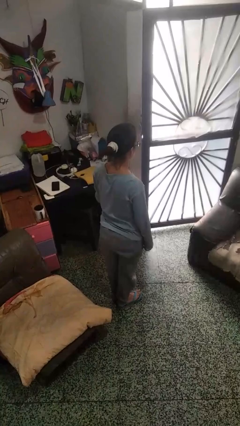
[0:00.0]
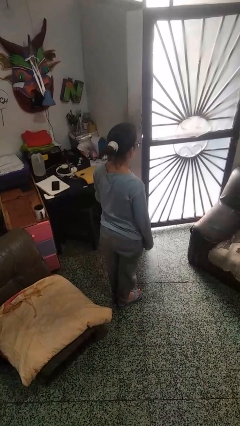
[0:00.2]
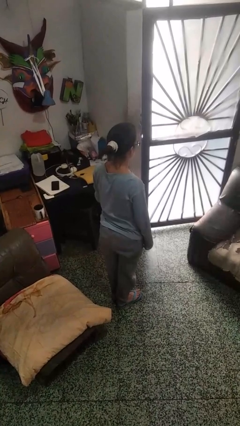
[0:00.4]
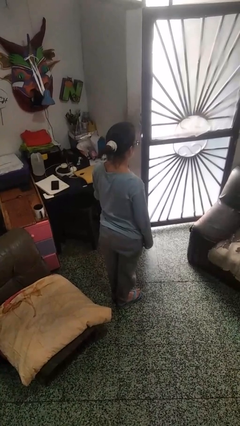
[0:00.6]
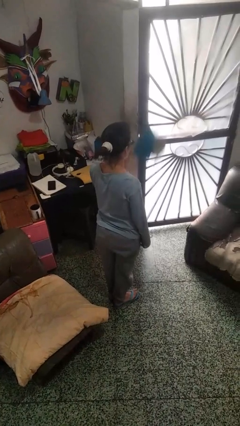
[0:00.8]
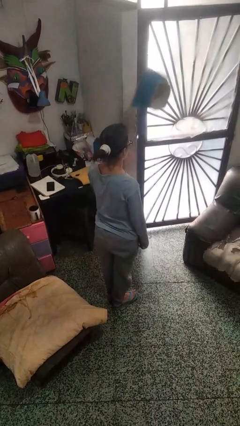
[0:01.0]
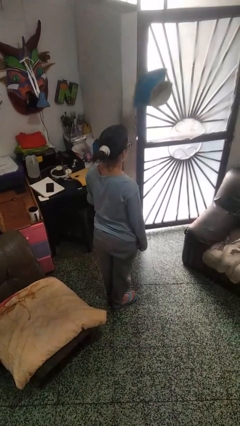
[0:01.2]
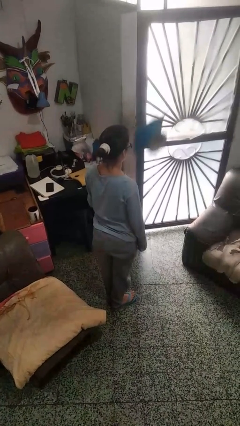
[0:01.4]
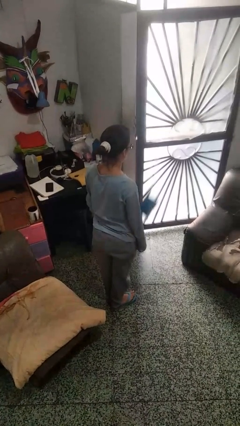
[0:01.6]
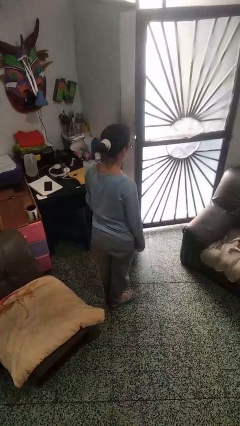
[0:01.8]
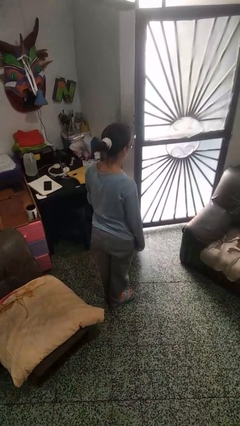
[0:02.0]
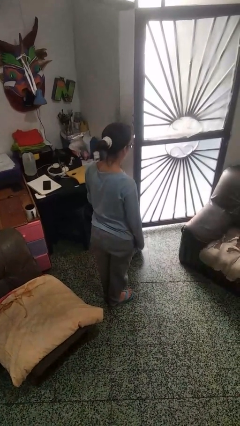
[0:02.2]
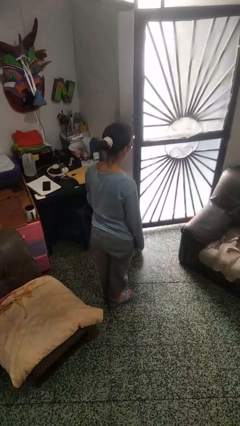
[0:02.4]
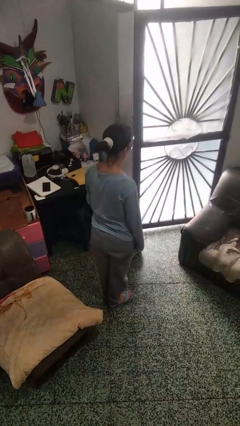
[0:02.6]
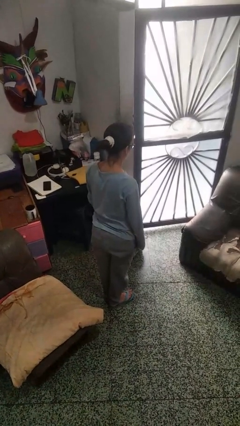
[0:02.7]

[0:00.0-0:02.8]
person throws object into air

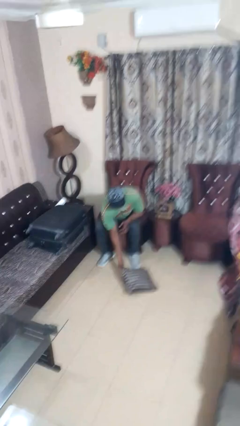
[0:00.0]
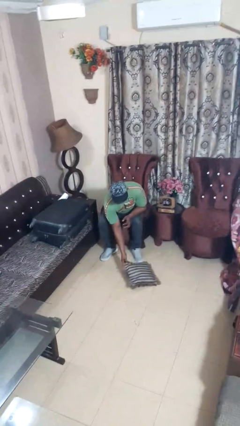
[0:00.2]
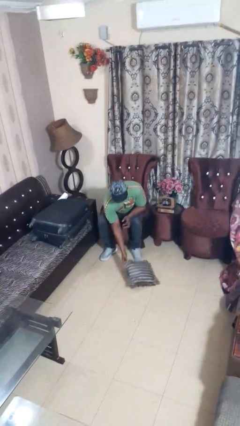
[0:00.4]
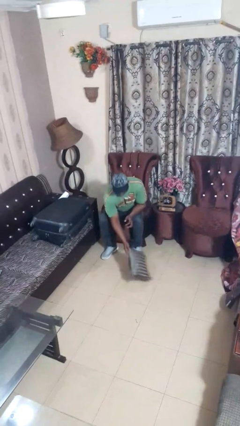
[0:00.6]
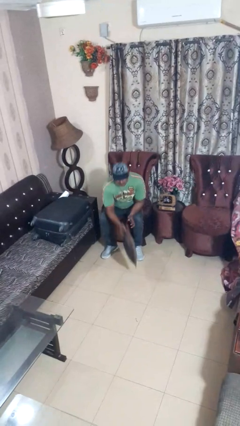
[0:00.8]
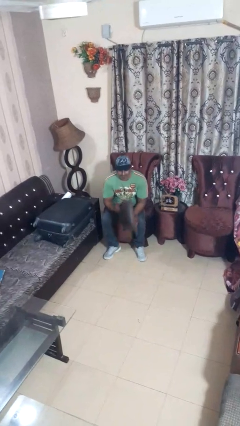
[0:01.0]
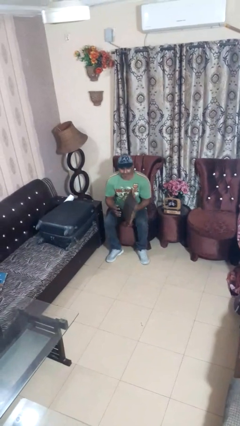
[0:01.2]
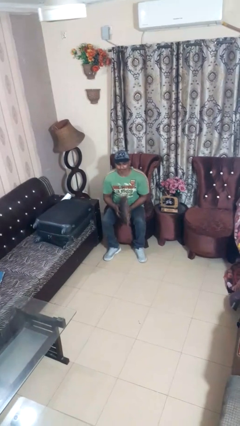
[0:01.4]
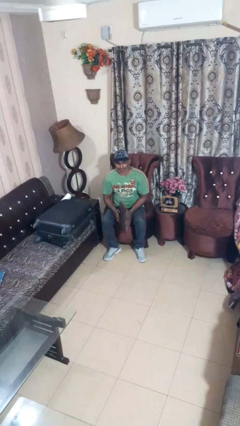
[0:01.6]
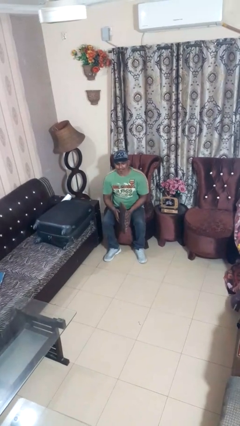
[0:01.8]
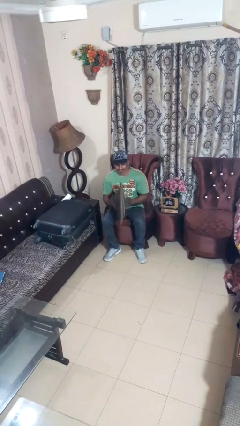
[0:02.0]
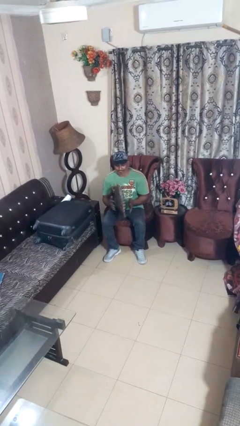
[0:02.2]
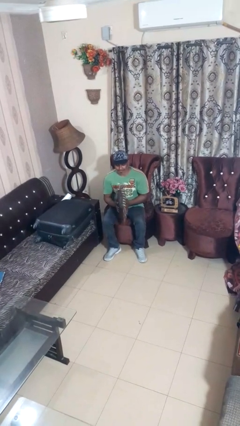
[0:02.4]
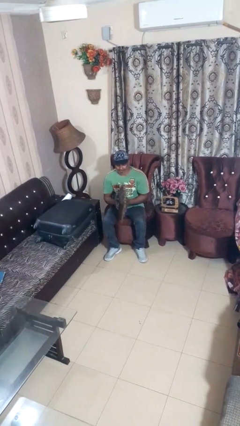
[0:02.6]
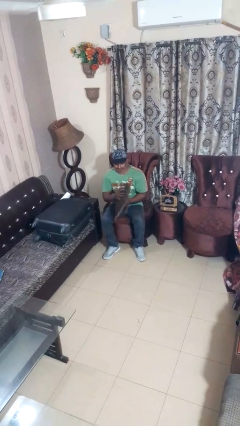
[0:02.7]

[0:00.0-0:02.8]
person picks up object from floor

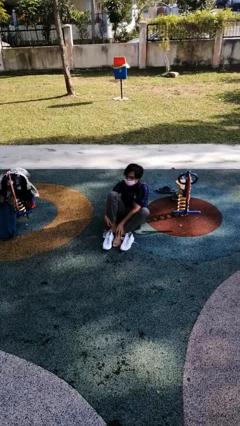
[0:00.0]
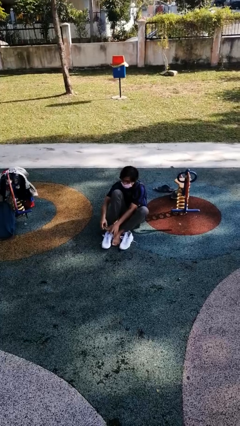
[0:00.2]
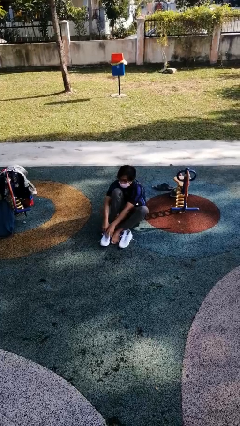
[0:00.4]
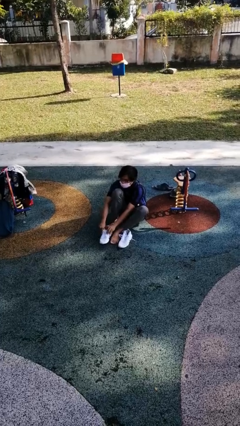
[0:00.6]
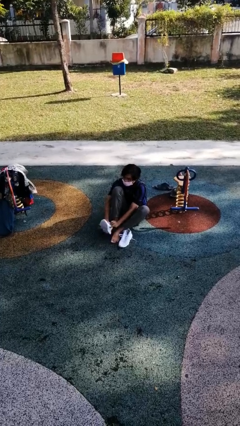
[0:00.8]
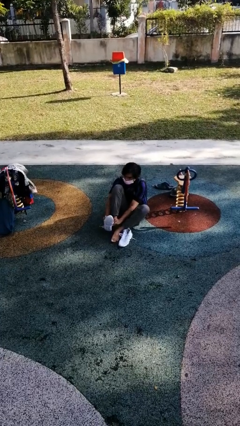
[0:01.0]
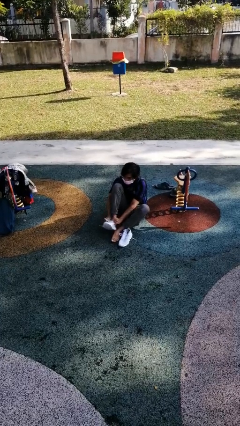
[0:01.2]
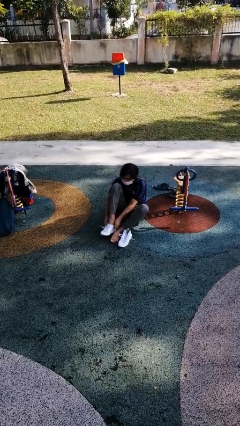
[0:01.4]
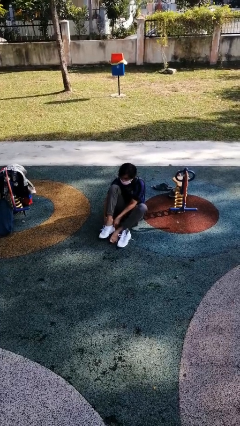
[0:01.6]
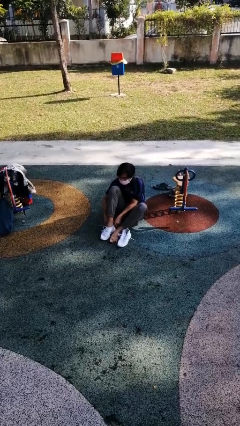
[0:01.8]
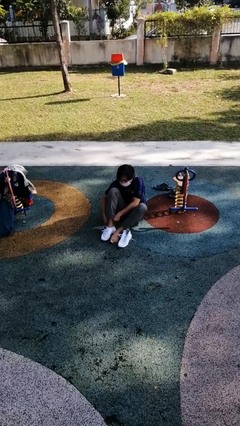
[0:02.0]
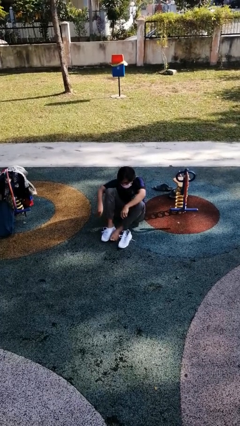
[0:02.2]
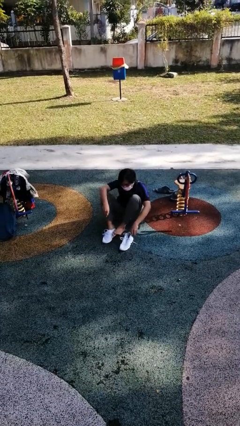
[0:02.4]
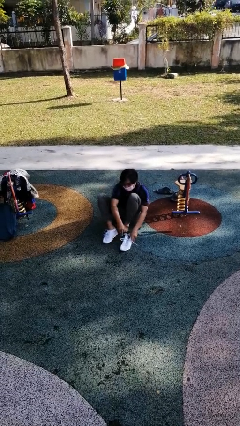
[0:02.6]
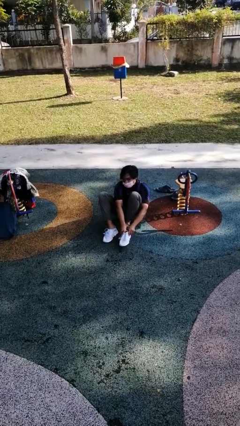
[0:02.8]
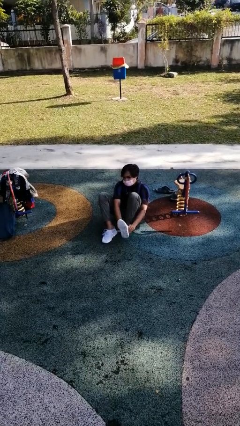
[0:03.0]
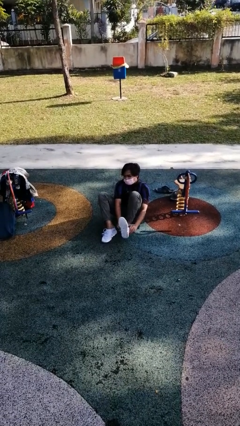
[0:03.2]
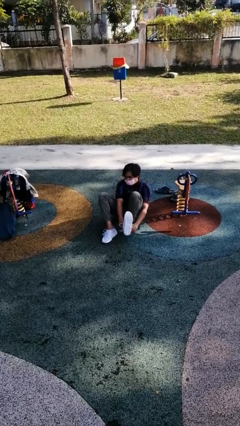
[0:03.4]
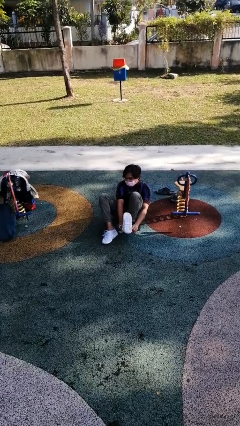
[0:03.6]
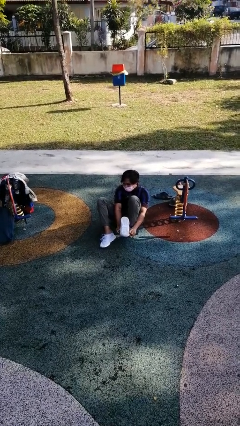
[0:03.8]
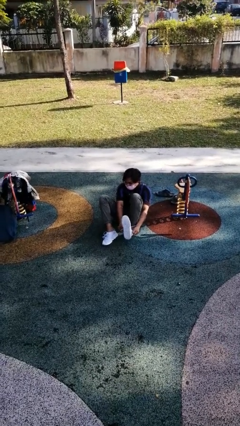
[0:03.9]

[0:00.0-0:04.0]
person puts on shoes

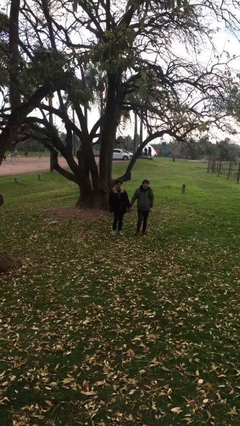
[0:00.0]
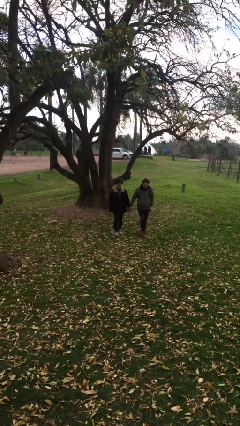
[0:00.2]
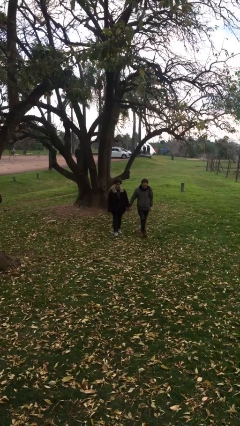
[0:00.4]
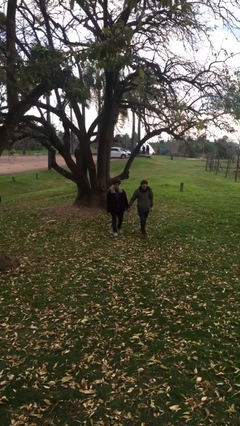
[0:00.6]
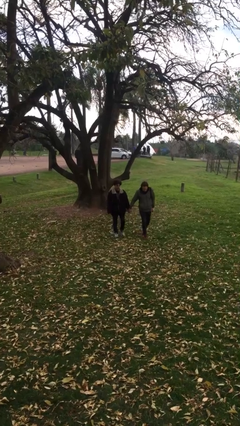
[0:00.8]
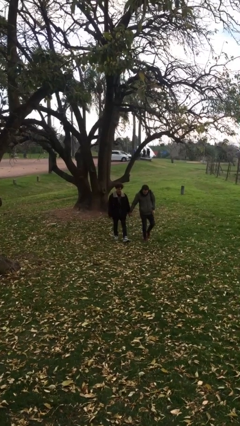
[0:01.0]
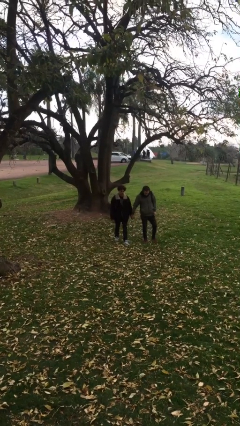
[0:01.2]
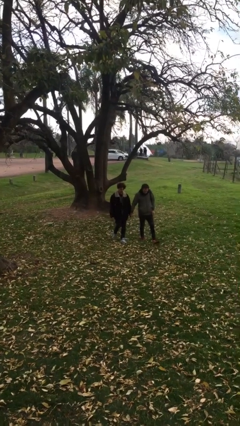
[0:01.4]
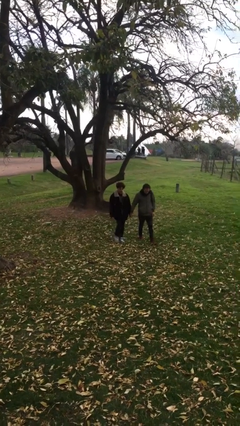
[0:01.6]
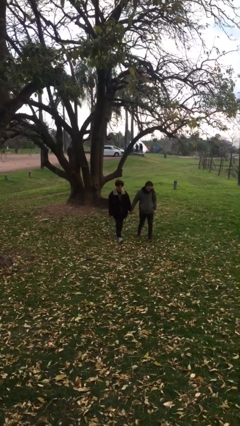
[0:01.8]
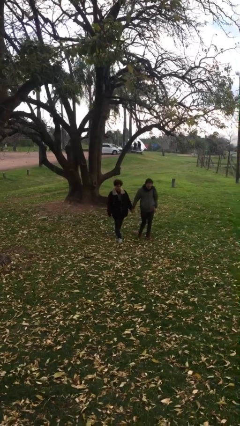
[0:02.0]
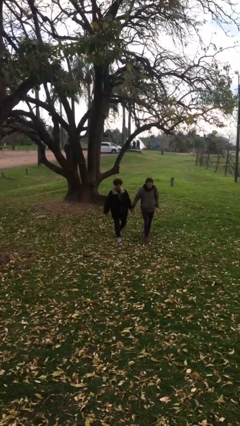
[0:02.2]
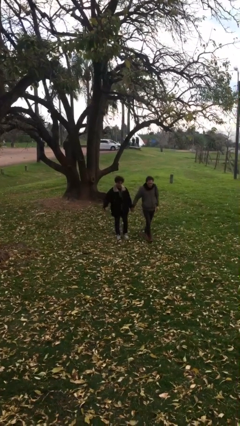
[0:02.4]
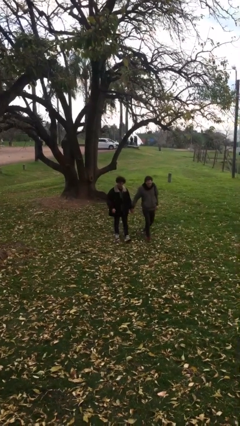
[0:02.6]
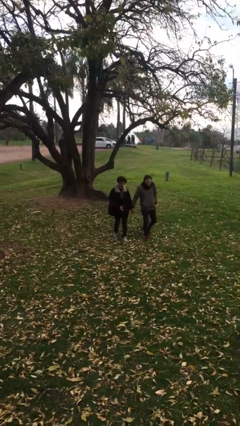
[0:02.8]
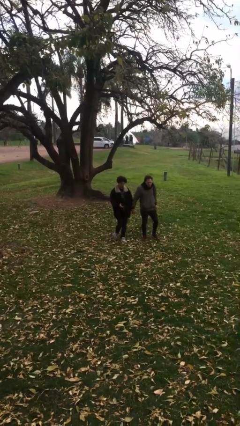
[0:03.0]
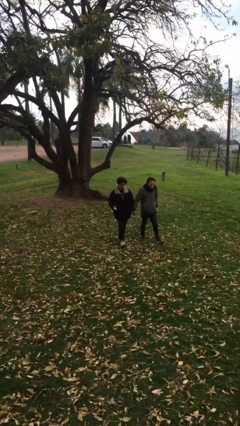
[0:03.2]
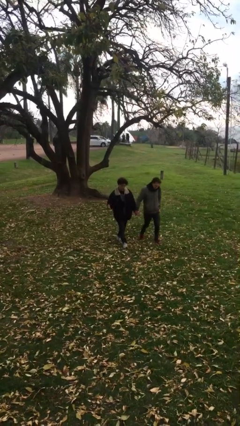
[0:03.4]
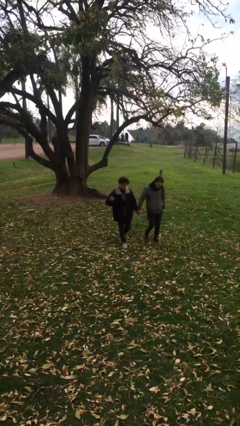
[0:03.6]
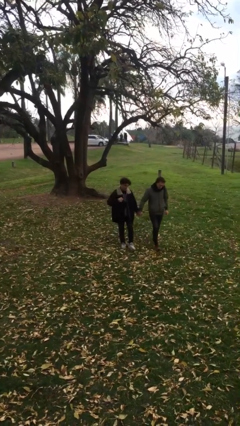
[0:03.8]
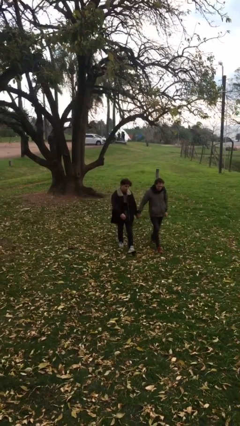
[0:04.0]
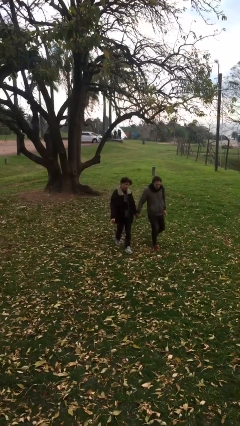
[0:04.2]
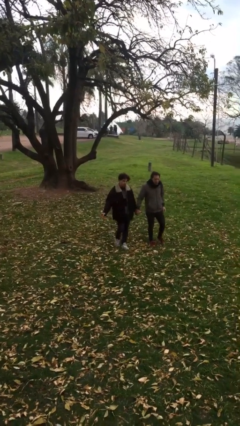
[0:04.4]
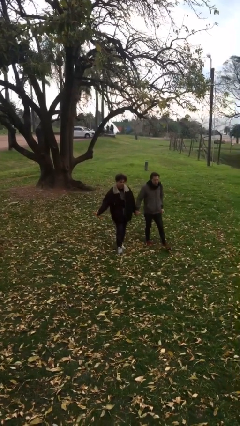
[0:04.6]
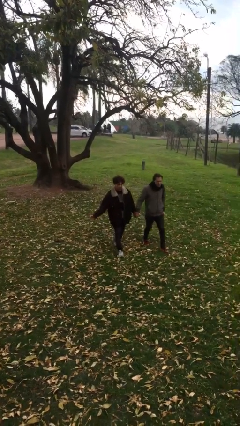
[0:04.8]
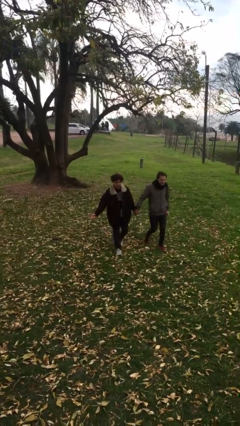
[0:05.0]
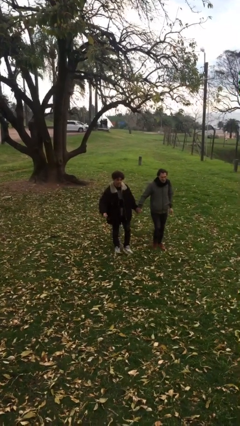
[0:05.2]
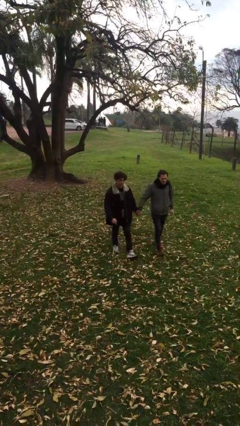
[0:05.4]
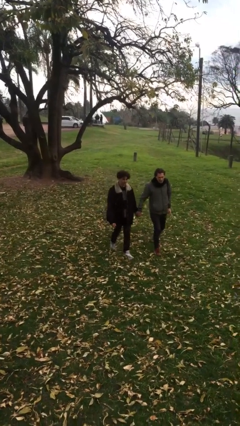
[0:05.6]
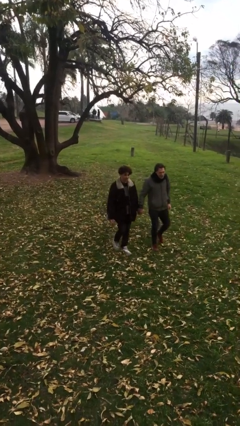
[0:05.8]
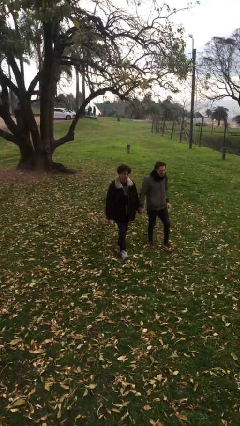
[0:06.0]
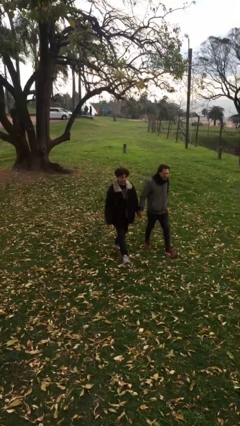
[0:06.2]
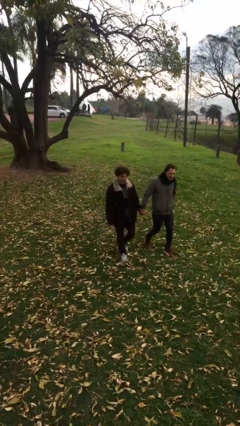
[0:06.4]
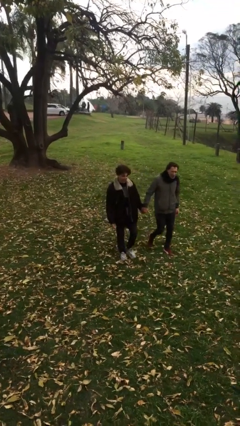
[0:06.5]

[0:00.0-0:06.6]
person holds hand

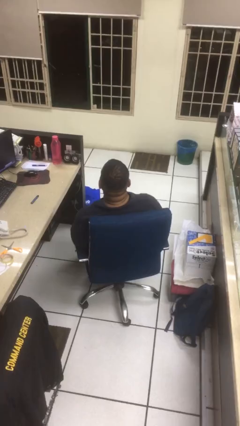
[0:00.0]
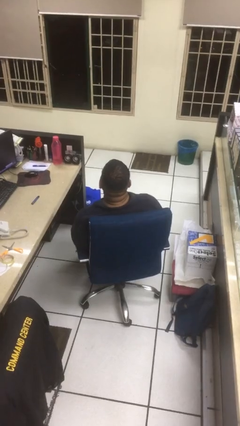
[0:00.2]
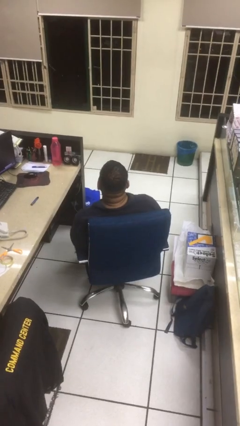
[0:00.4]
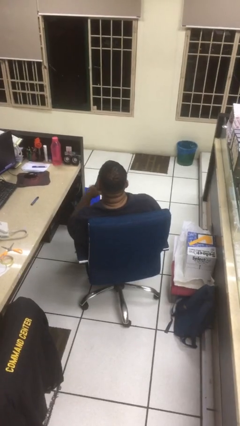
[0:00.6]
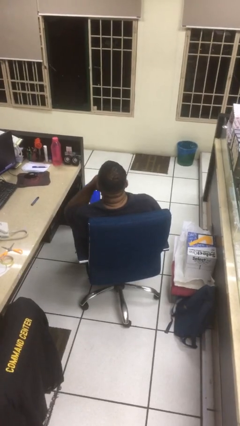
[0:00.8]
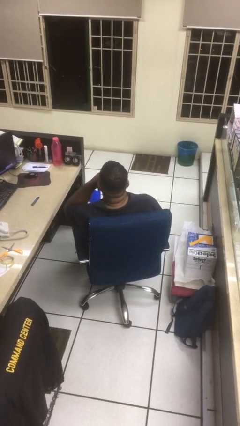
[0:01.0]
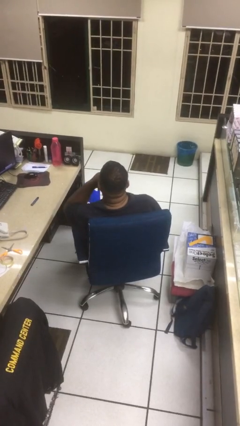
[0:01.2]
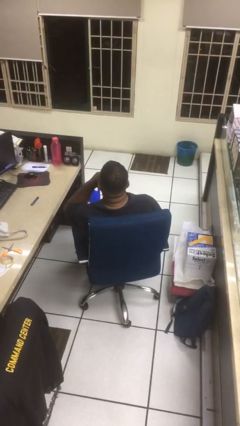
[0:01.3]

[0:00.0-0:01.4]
person gestures be quiet
